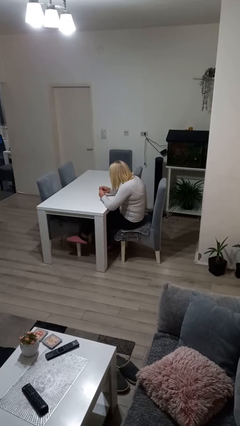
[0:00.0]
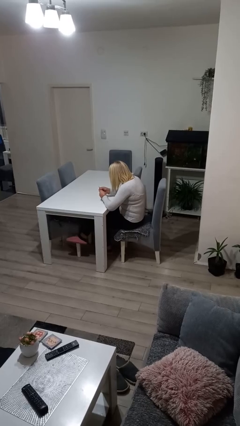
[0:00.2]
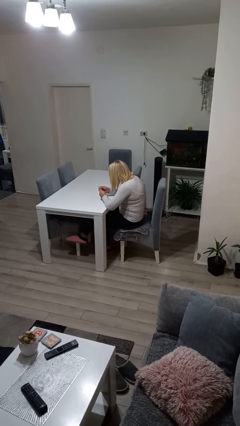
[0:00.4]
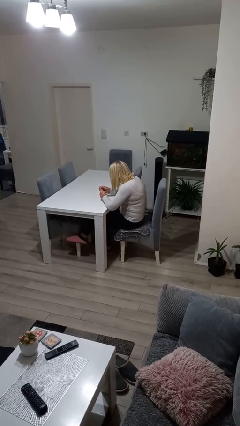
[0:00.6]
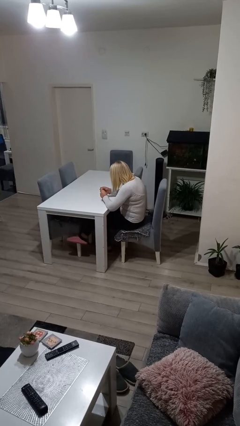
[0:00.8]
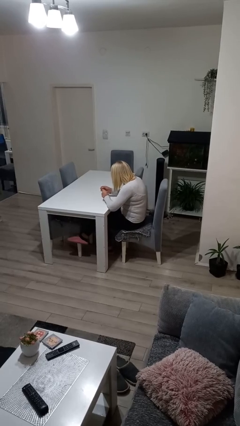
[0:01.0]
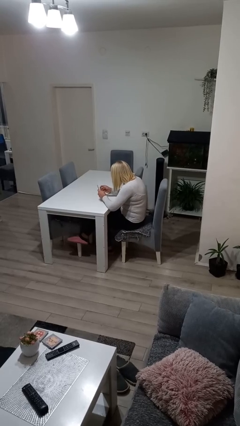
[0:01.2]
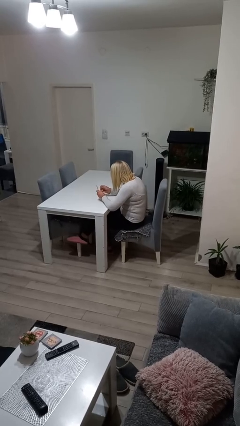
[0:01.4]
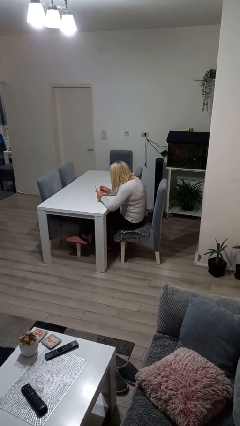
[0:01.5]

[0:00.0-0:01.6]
person files fingernails

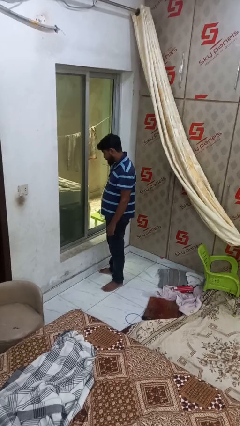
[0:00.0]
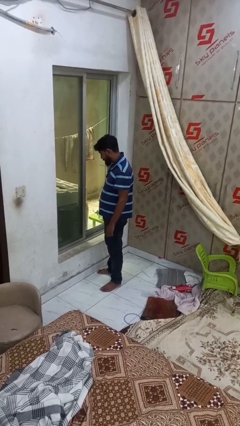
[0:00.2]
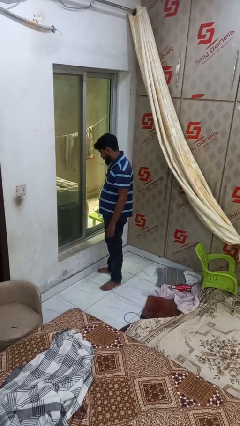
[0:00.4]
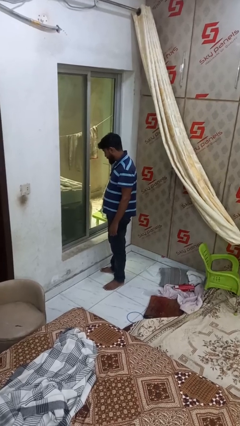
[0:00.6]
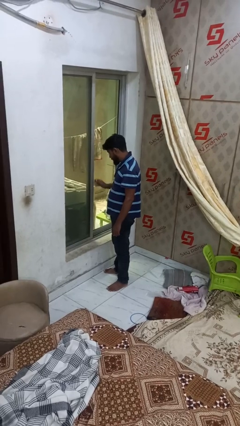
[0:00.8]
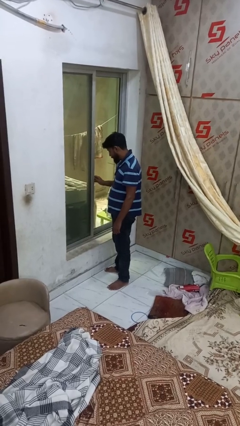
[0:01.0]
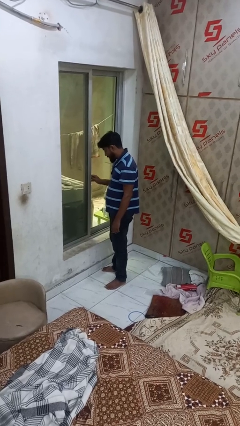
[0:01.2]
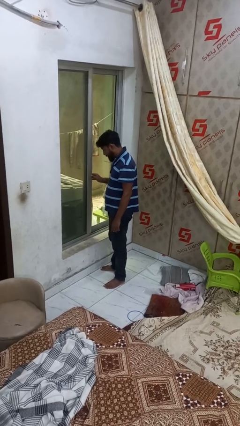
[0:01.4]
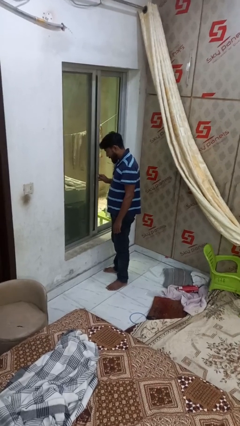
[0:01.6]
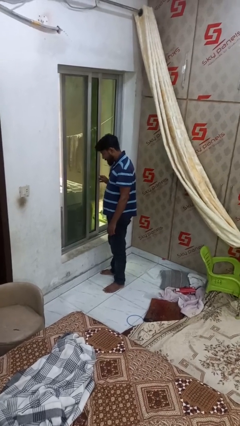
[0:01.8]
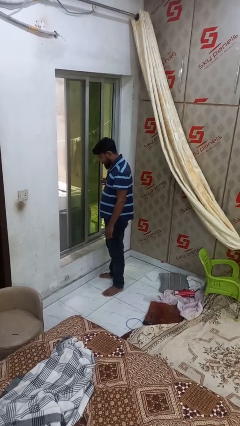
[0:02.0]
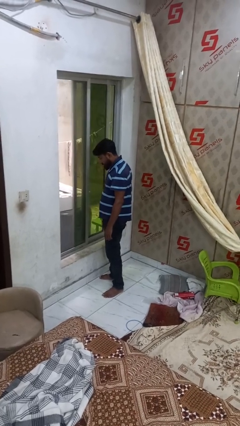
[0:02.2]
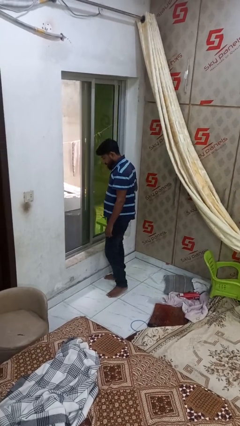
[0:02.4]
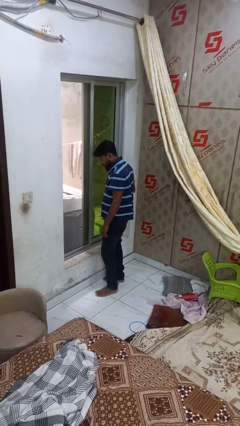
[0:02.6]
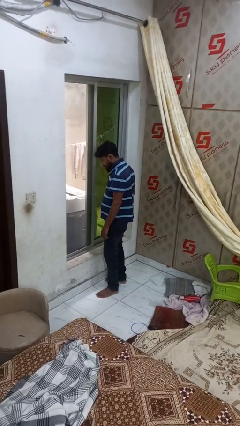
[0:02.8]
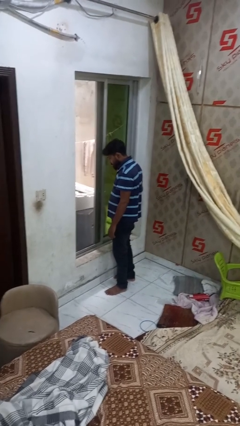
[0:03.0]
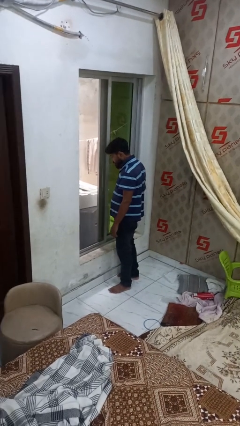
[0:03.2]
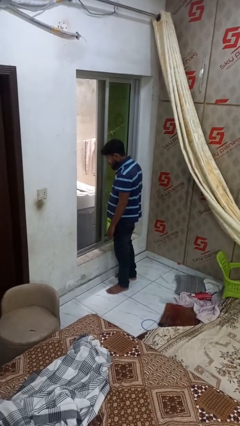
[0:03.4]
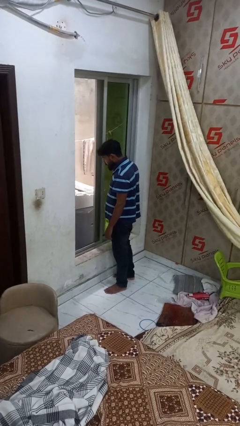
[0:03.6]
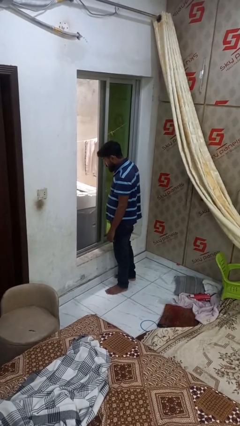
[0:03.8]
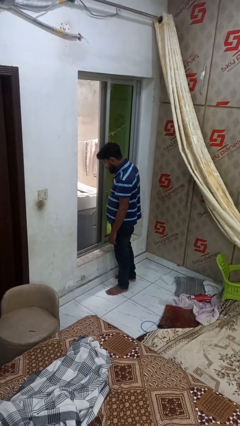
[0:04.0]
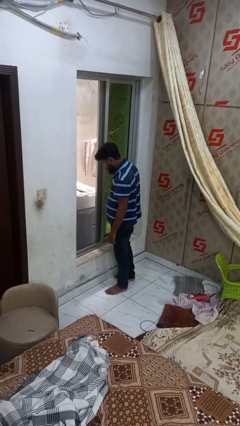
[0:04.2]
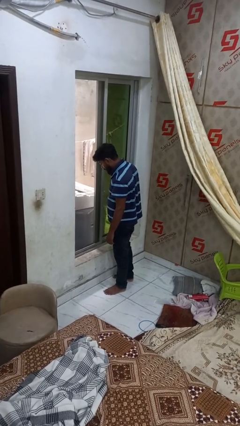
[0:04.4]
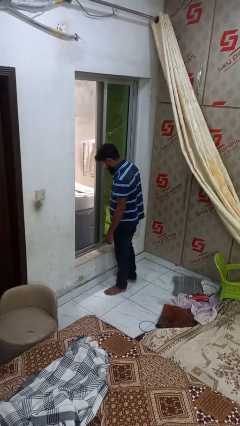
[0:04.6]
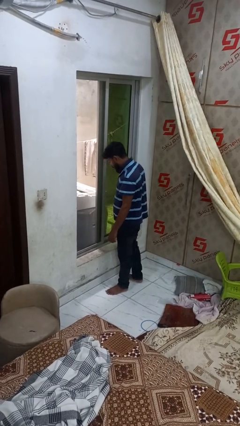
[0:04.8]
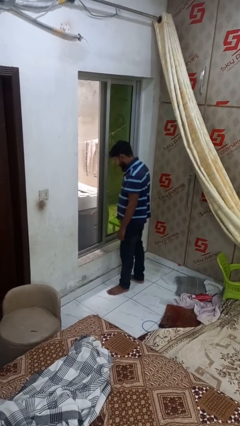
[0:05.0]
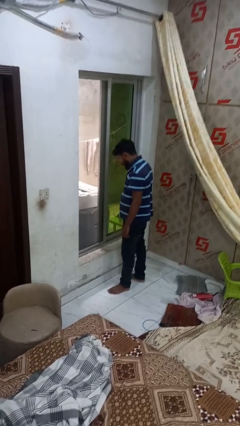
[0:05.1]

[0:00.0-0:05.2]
person opens sliding door

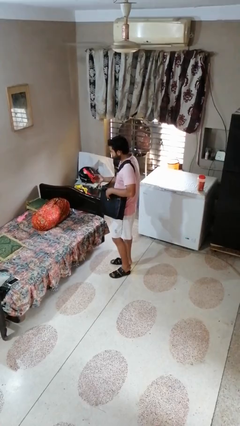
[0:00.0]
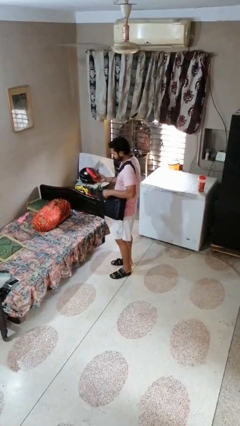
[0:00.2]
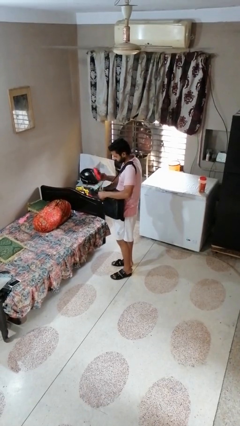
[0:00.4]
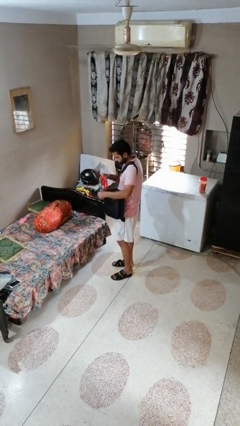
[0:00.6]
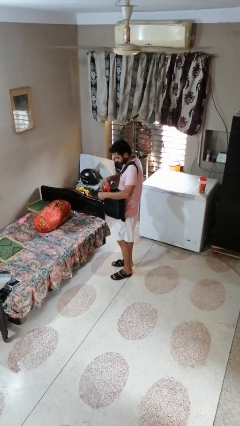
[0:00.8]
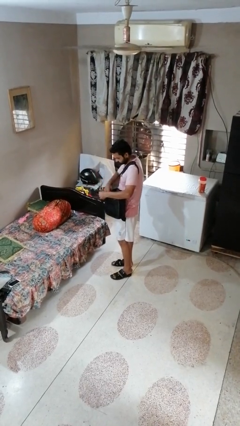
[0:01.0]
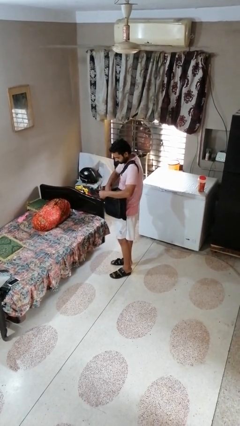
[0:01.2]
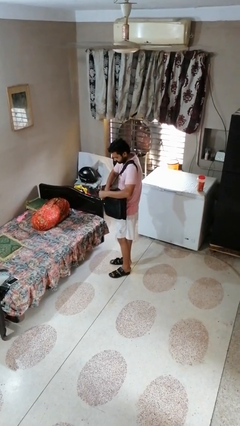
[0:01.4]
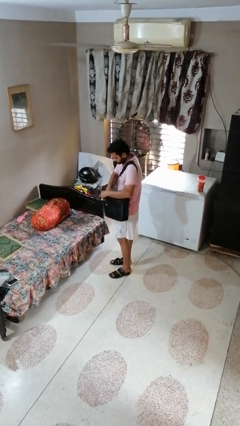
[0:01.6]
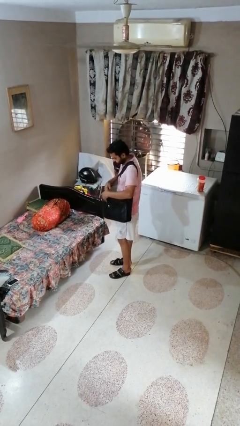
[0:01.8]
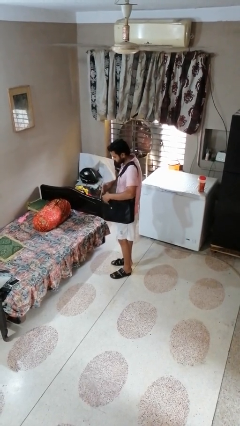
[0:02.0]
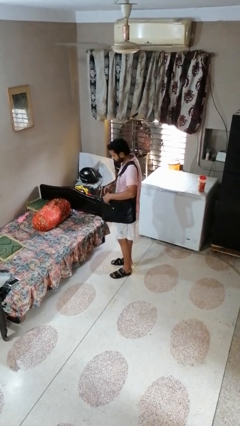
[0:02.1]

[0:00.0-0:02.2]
person puts object into backpack

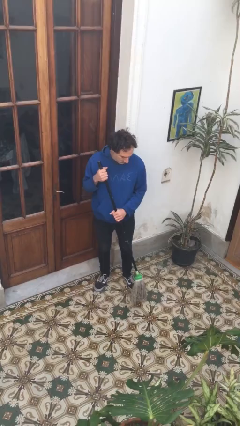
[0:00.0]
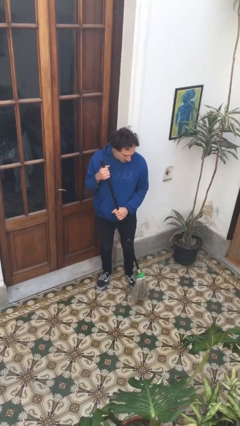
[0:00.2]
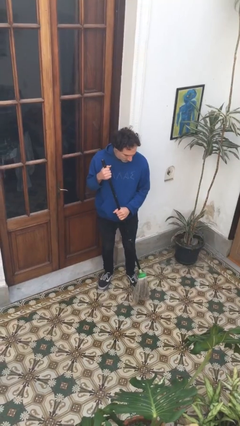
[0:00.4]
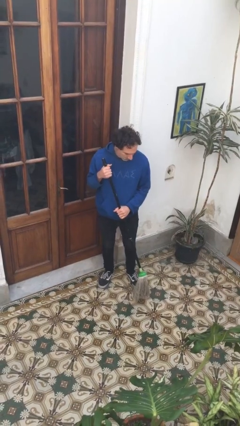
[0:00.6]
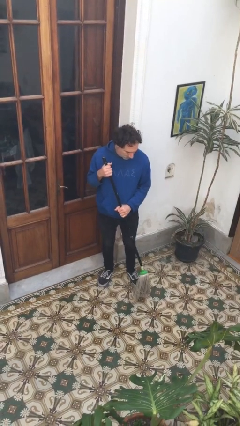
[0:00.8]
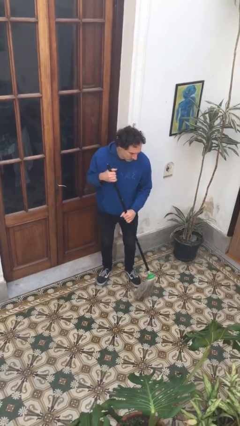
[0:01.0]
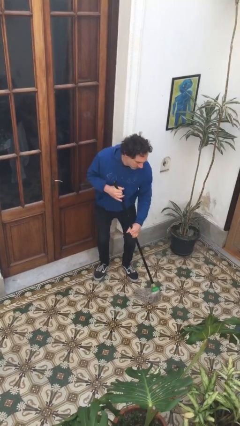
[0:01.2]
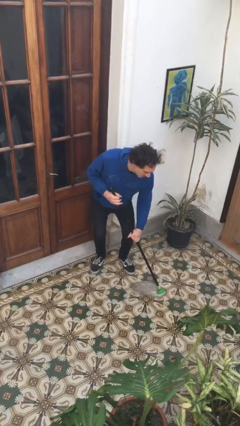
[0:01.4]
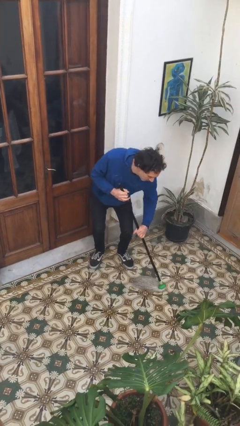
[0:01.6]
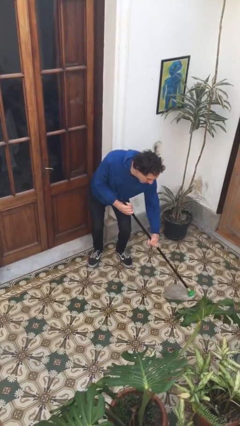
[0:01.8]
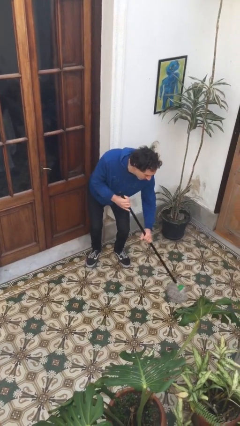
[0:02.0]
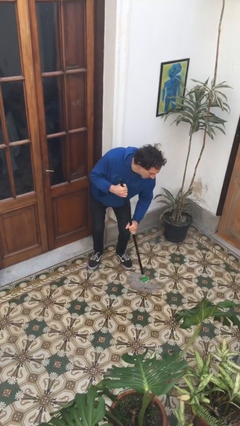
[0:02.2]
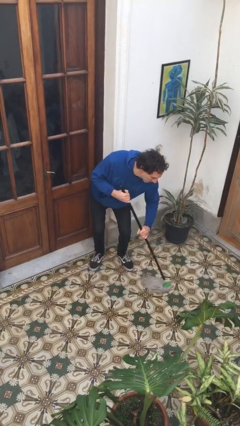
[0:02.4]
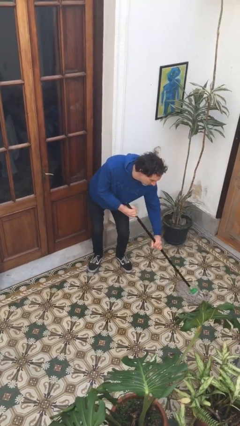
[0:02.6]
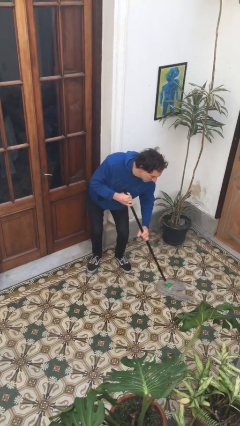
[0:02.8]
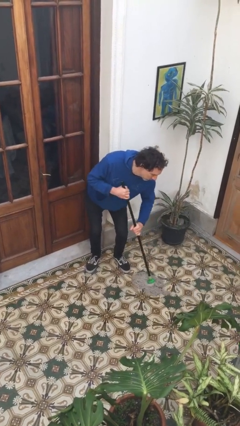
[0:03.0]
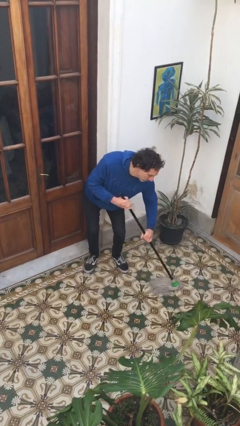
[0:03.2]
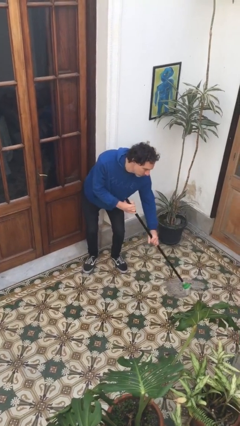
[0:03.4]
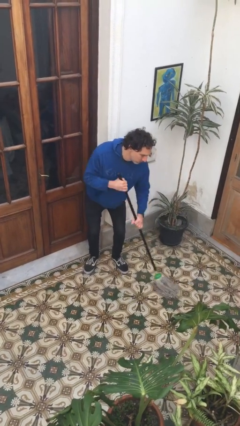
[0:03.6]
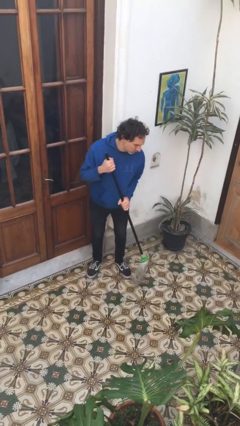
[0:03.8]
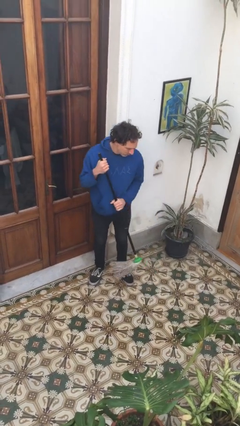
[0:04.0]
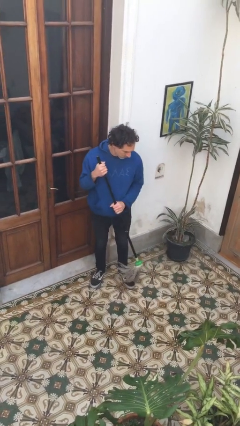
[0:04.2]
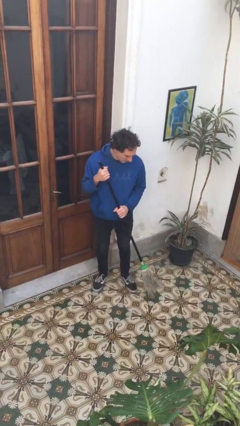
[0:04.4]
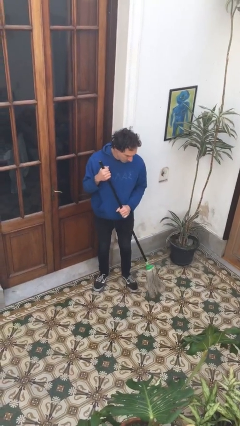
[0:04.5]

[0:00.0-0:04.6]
person mops

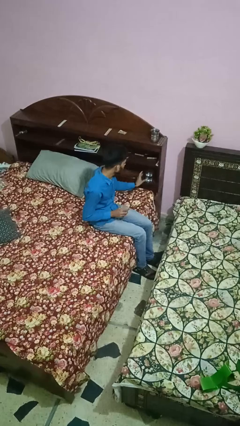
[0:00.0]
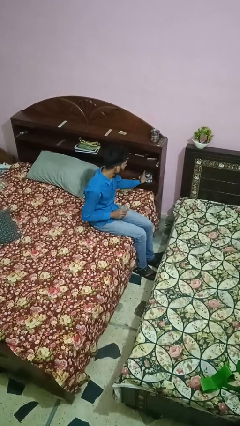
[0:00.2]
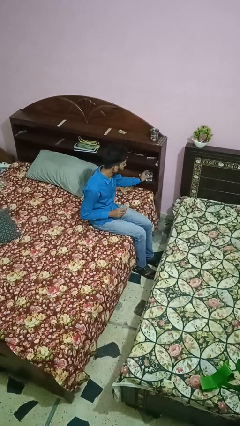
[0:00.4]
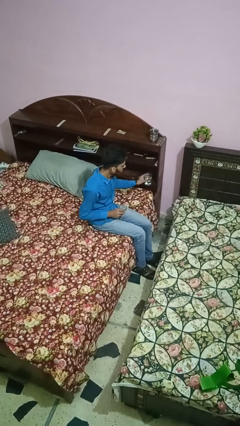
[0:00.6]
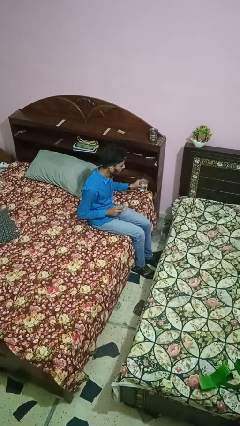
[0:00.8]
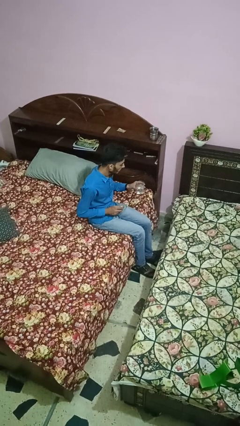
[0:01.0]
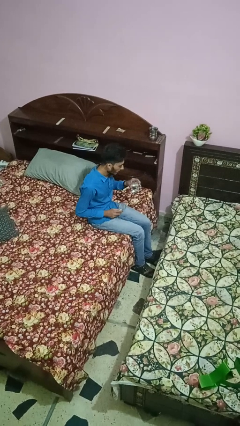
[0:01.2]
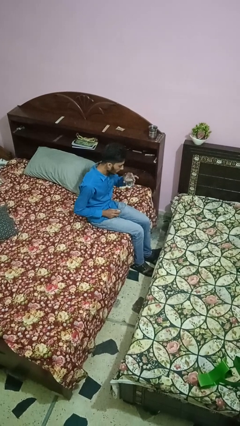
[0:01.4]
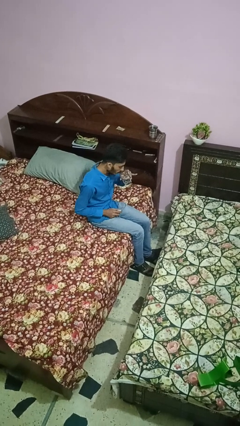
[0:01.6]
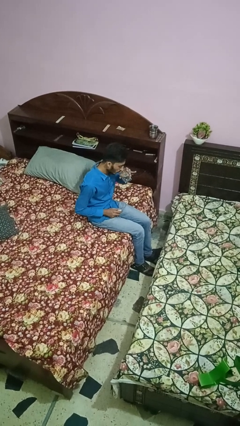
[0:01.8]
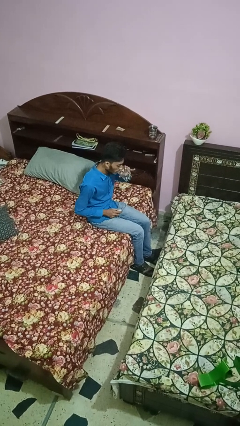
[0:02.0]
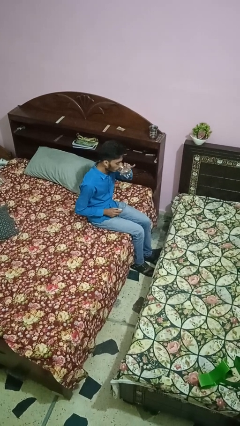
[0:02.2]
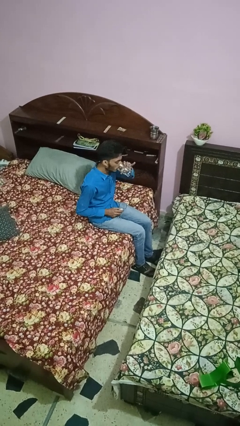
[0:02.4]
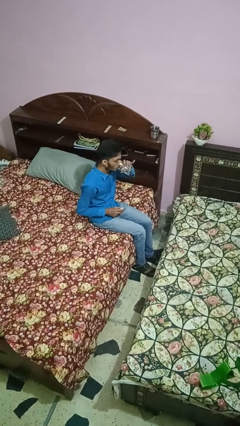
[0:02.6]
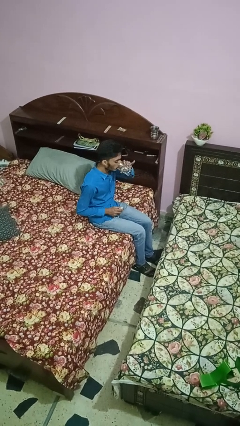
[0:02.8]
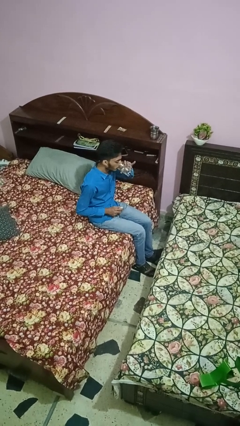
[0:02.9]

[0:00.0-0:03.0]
person drinks from cup

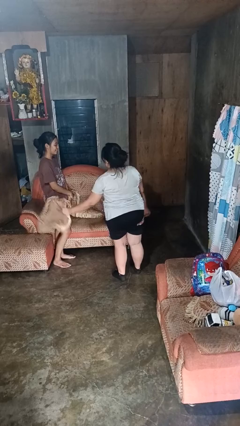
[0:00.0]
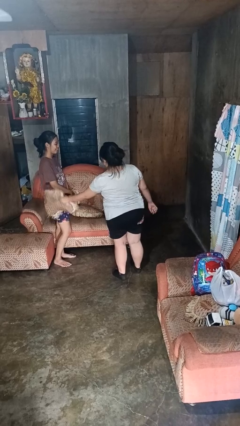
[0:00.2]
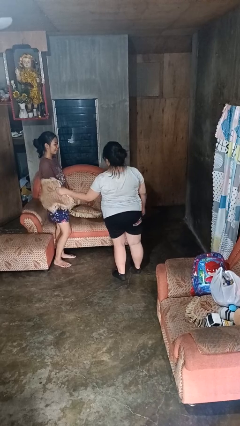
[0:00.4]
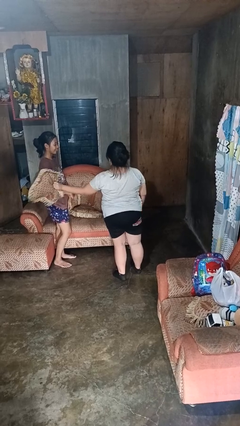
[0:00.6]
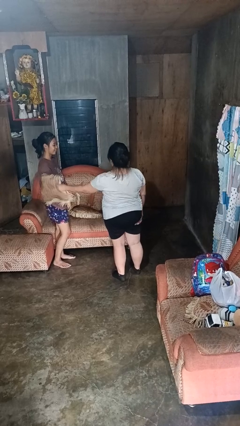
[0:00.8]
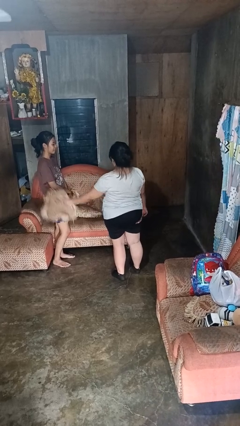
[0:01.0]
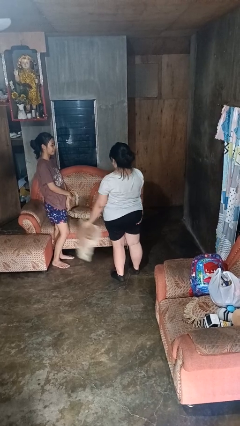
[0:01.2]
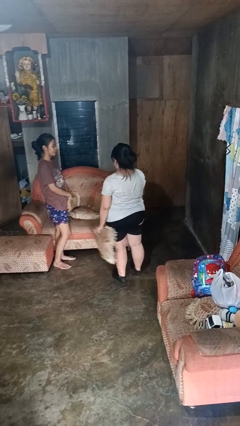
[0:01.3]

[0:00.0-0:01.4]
person hits person with pillow
